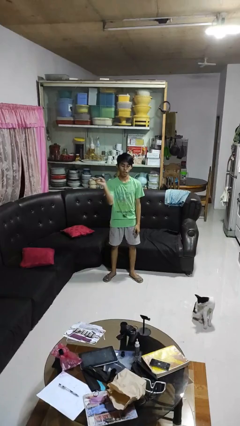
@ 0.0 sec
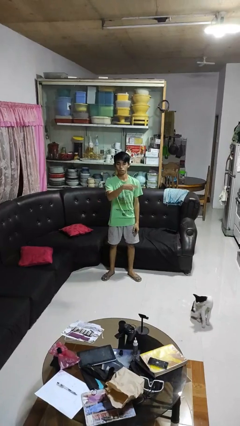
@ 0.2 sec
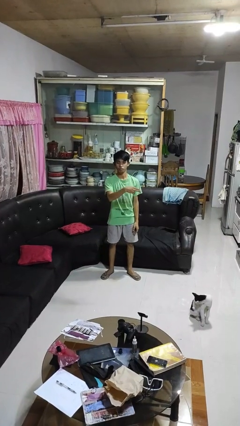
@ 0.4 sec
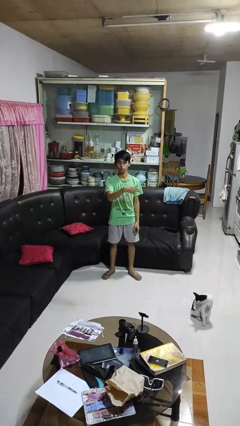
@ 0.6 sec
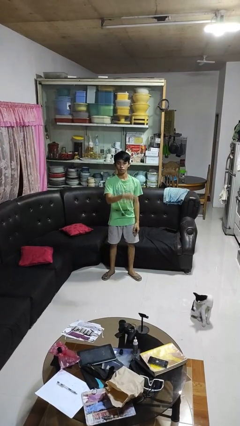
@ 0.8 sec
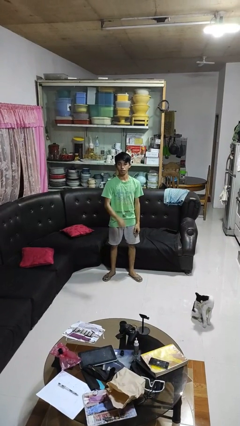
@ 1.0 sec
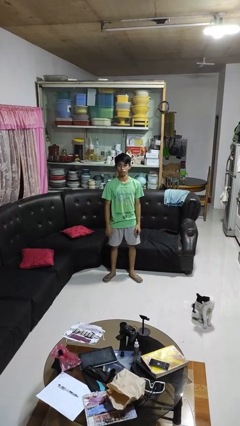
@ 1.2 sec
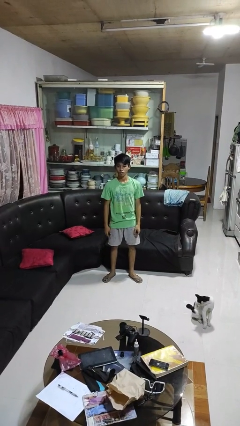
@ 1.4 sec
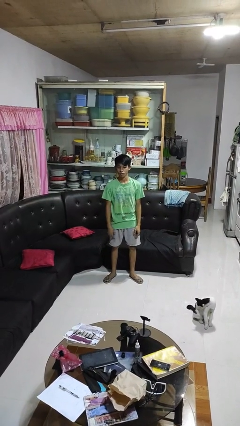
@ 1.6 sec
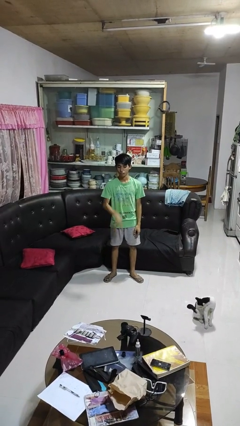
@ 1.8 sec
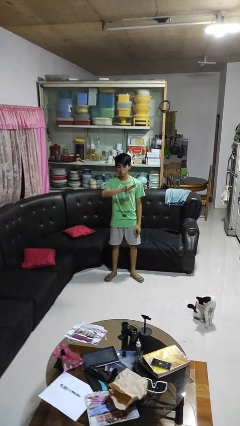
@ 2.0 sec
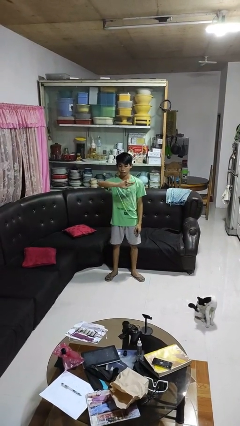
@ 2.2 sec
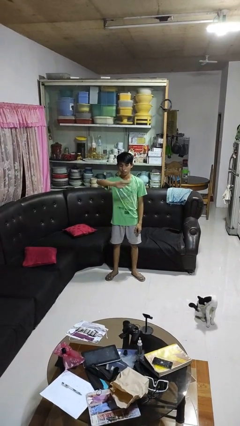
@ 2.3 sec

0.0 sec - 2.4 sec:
person gestures swipe left

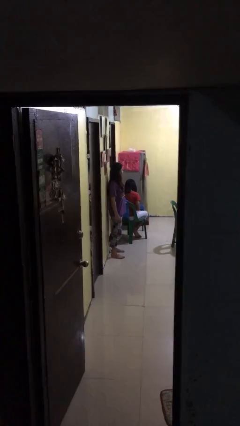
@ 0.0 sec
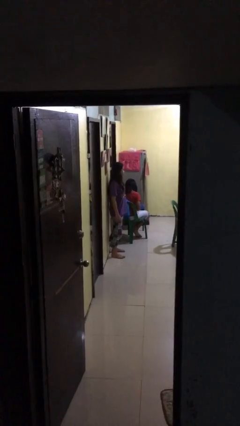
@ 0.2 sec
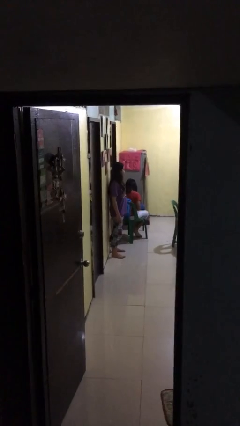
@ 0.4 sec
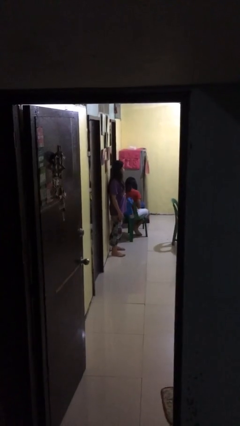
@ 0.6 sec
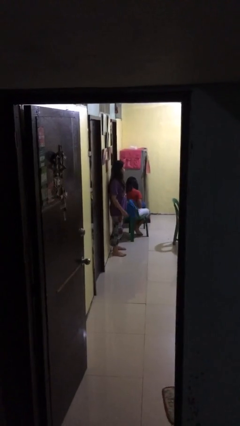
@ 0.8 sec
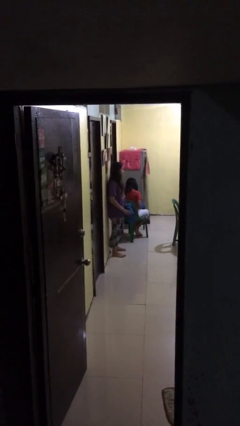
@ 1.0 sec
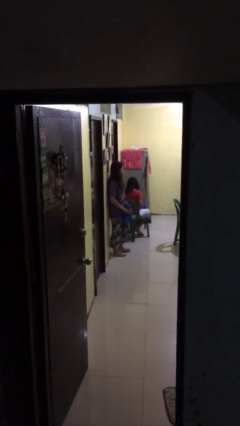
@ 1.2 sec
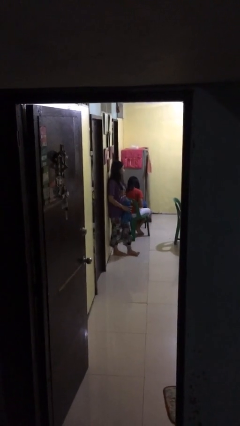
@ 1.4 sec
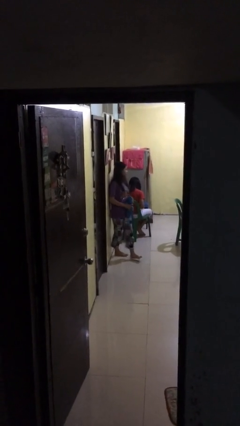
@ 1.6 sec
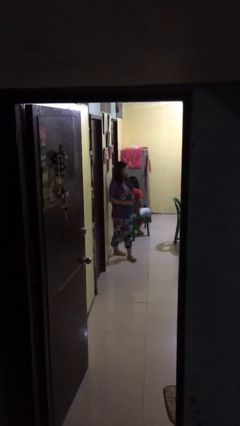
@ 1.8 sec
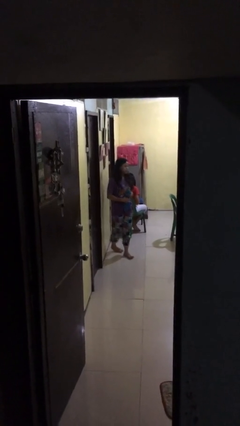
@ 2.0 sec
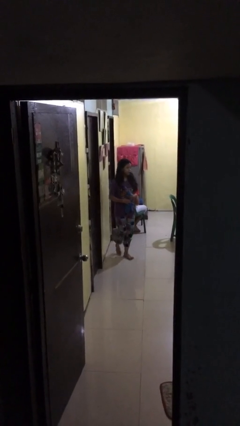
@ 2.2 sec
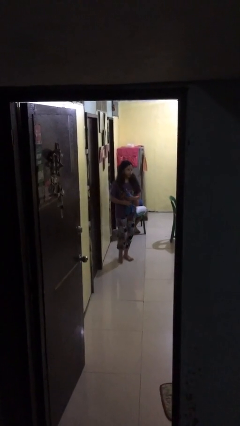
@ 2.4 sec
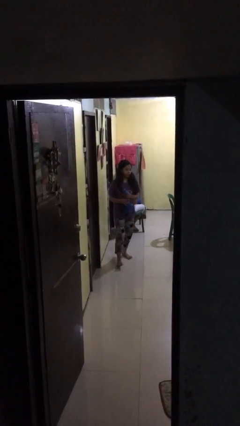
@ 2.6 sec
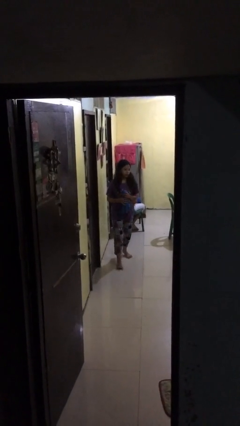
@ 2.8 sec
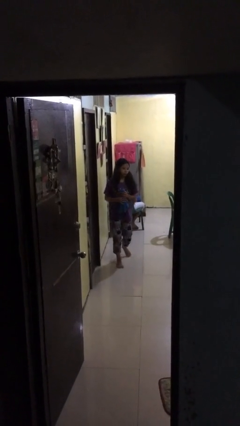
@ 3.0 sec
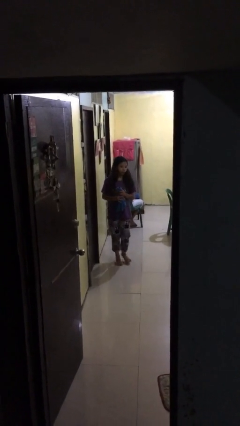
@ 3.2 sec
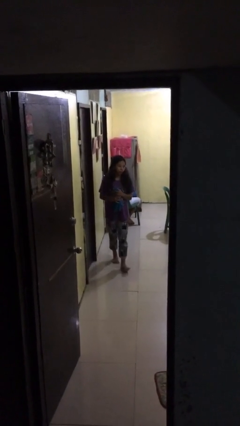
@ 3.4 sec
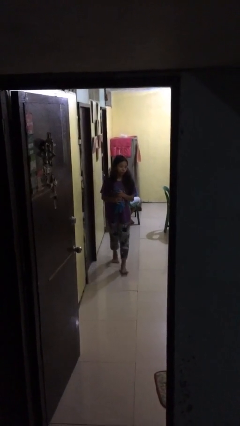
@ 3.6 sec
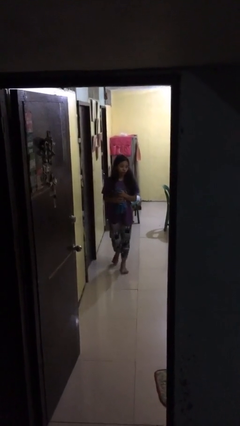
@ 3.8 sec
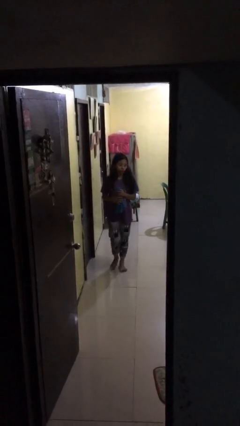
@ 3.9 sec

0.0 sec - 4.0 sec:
person steals object from person

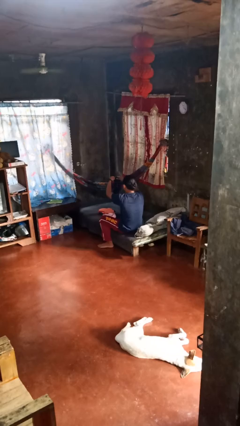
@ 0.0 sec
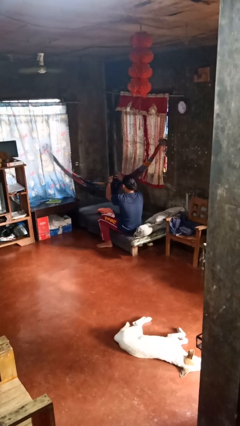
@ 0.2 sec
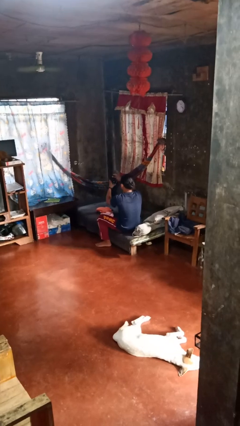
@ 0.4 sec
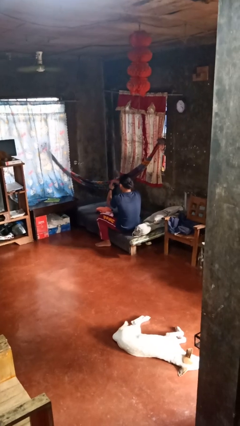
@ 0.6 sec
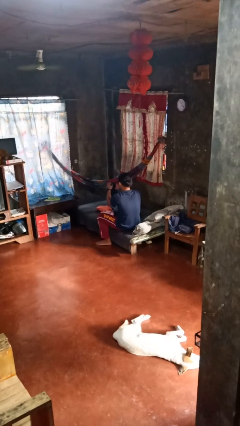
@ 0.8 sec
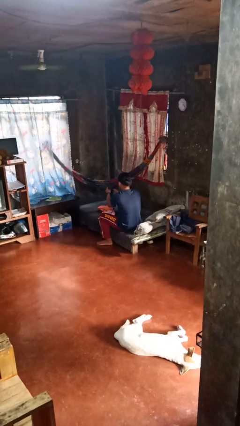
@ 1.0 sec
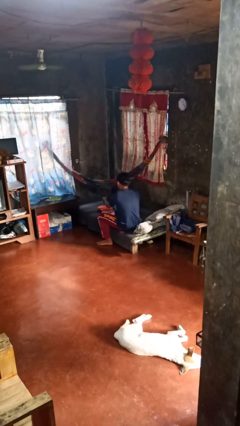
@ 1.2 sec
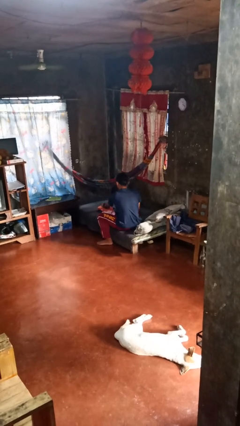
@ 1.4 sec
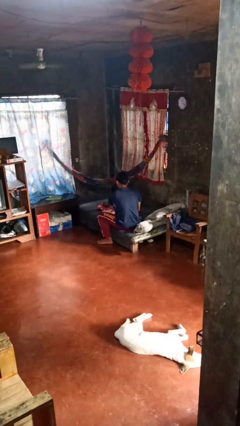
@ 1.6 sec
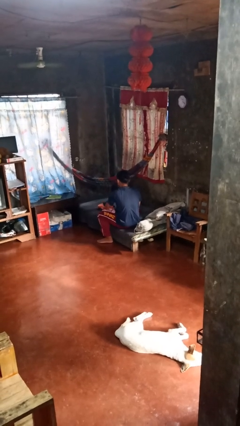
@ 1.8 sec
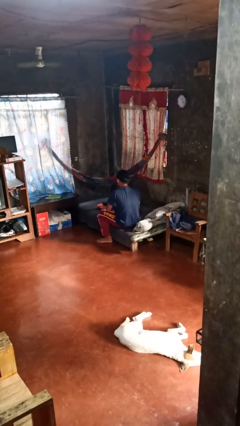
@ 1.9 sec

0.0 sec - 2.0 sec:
person folds socks

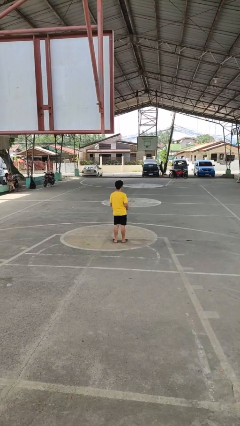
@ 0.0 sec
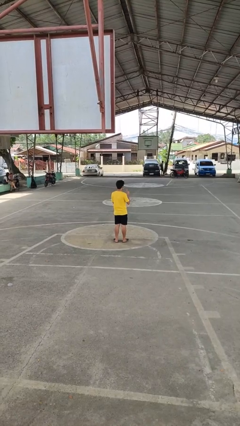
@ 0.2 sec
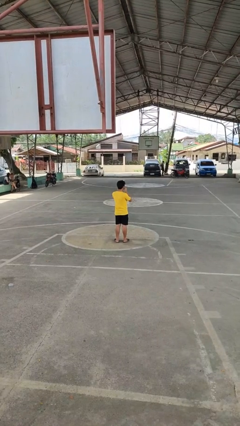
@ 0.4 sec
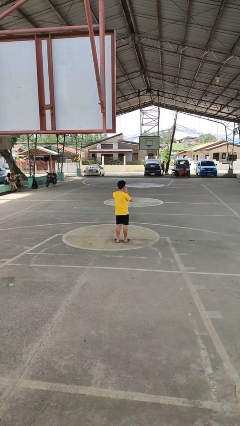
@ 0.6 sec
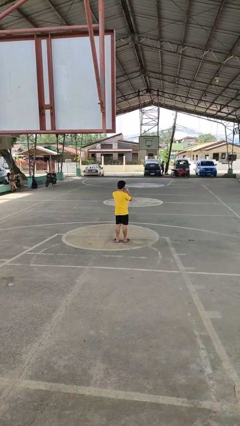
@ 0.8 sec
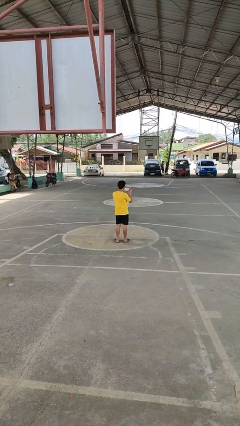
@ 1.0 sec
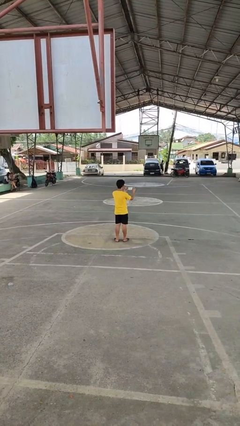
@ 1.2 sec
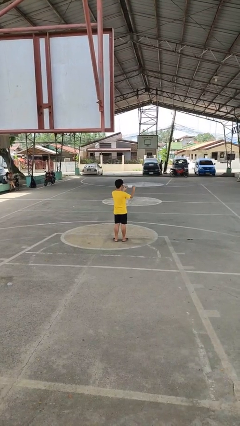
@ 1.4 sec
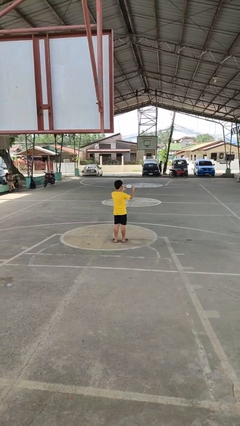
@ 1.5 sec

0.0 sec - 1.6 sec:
person takes off facemask

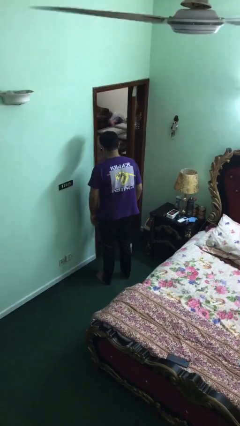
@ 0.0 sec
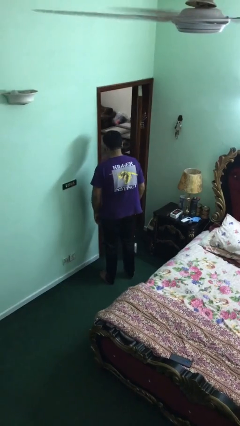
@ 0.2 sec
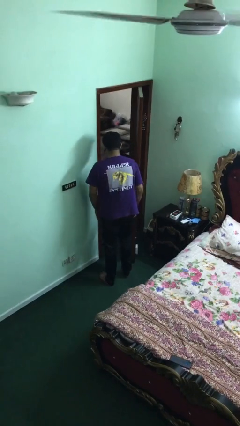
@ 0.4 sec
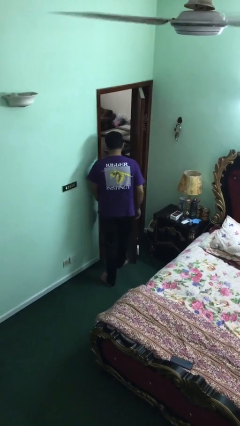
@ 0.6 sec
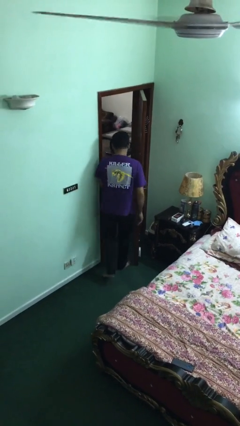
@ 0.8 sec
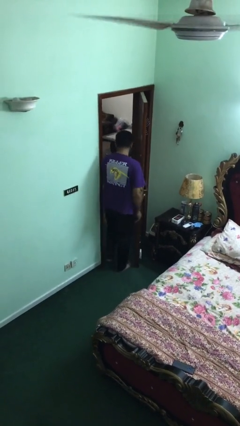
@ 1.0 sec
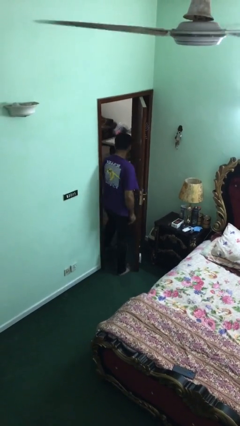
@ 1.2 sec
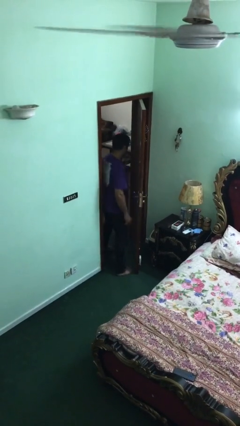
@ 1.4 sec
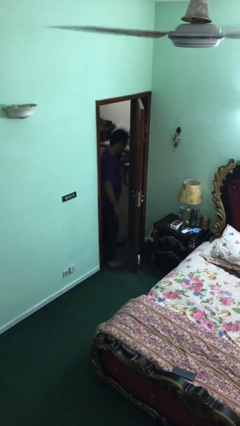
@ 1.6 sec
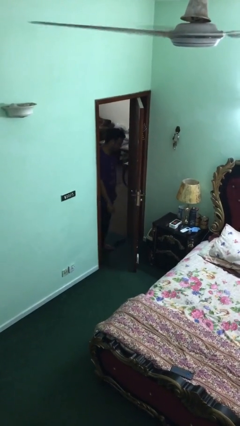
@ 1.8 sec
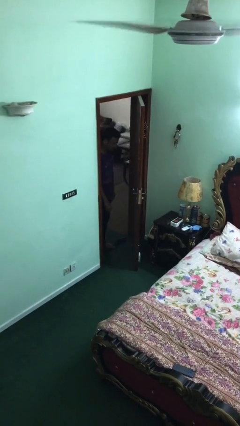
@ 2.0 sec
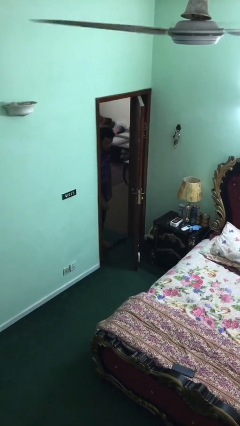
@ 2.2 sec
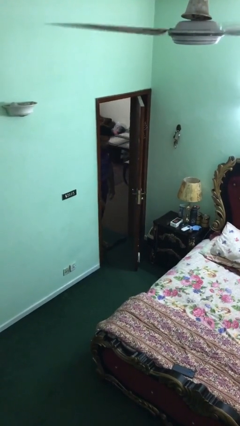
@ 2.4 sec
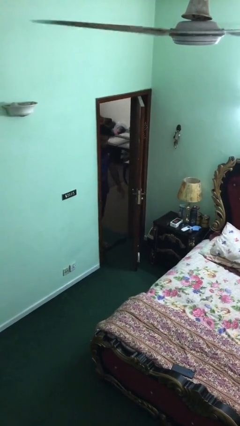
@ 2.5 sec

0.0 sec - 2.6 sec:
person exits scene through structure

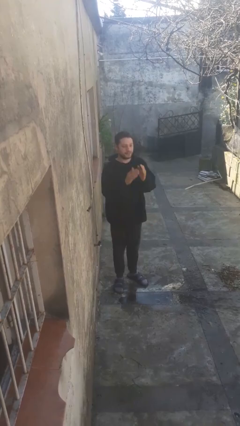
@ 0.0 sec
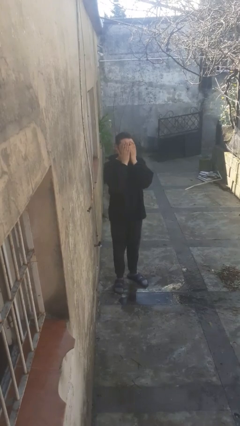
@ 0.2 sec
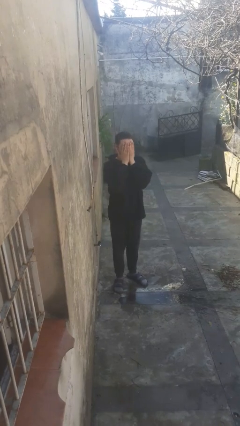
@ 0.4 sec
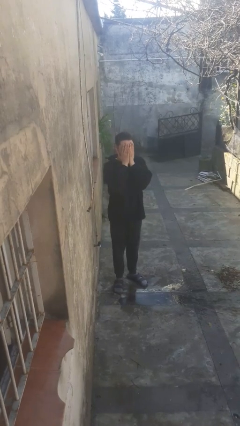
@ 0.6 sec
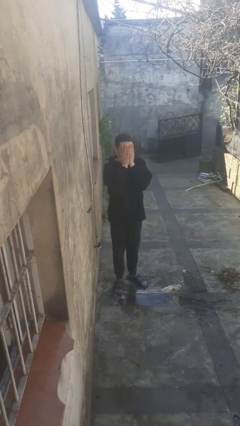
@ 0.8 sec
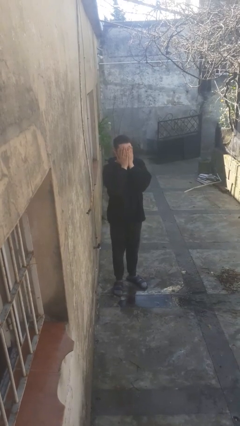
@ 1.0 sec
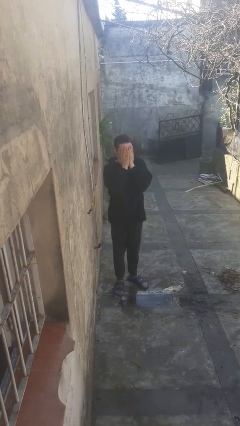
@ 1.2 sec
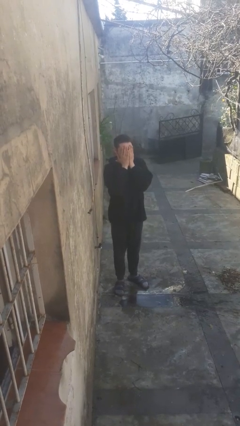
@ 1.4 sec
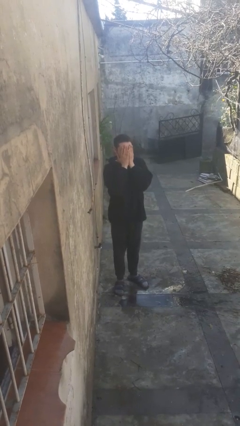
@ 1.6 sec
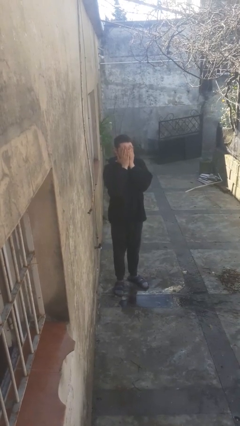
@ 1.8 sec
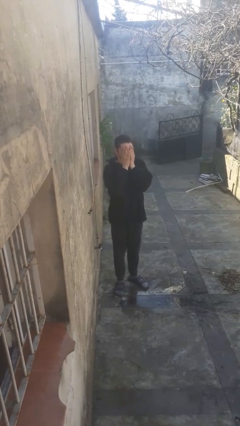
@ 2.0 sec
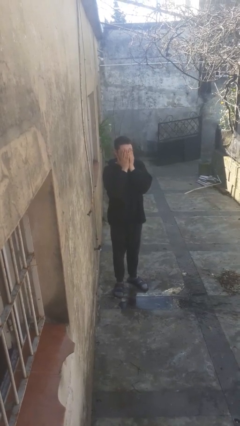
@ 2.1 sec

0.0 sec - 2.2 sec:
person covers face with hands

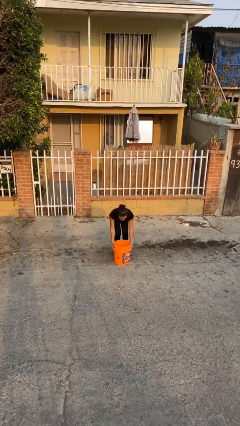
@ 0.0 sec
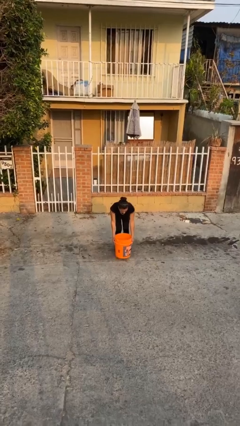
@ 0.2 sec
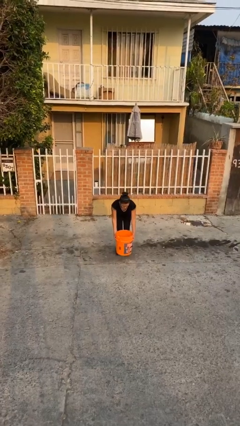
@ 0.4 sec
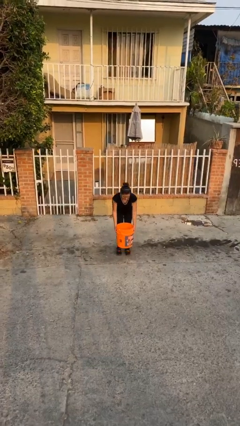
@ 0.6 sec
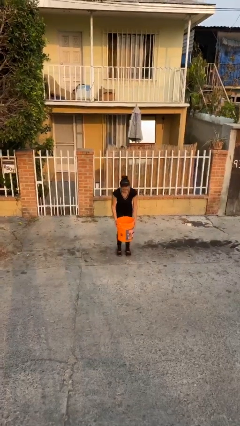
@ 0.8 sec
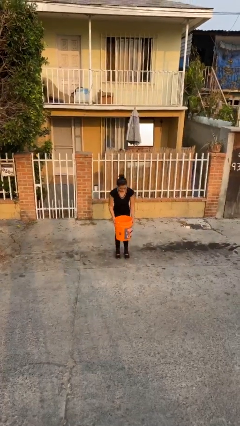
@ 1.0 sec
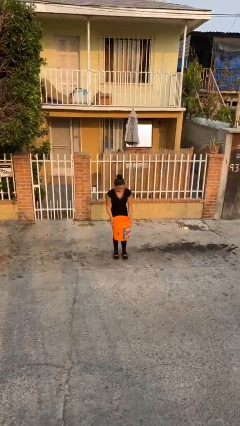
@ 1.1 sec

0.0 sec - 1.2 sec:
person picks up object from floor

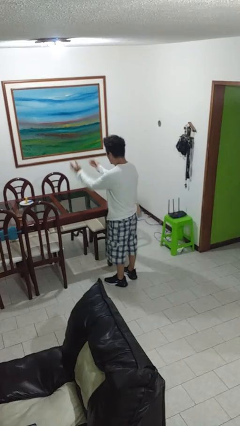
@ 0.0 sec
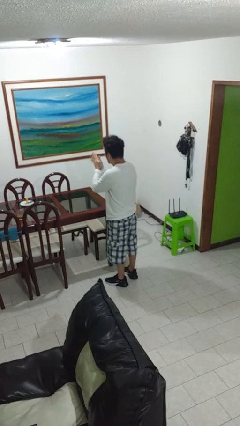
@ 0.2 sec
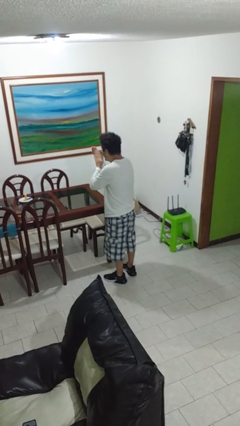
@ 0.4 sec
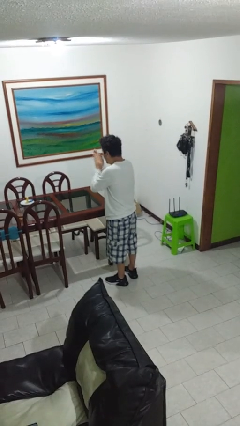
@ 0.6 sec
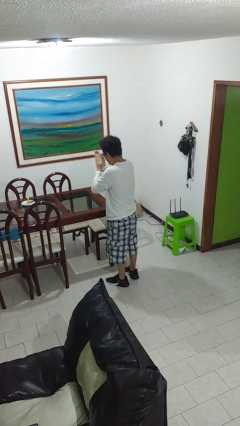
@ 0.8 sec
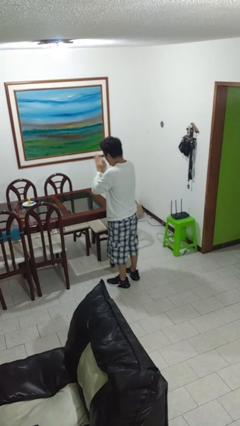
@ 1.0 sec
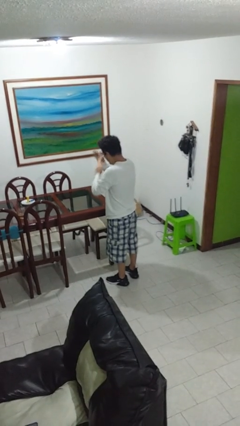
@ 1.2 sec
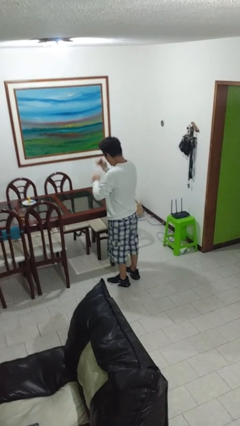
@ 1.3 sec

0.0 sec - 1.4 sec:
person blows into hands
